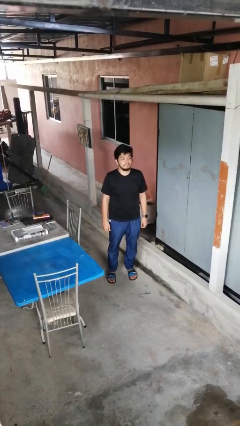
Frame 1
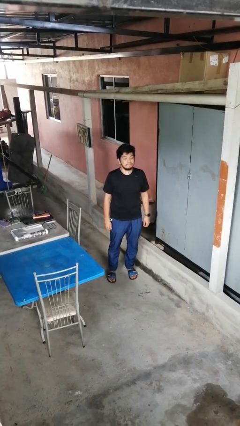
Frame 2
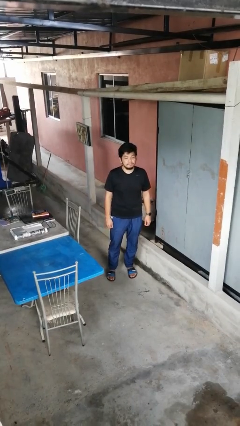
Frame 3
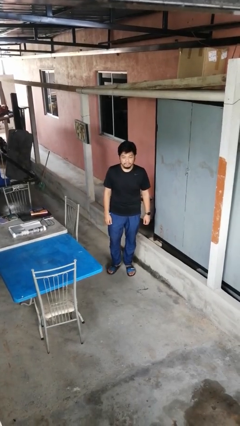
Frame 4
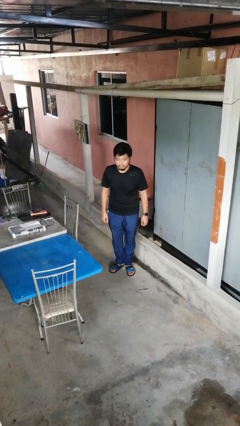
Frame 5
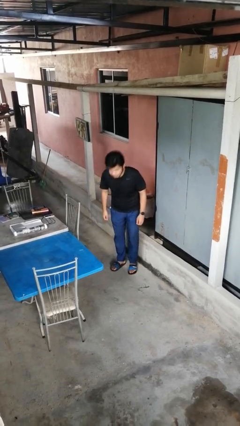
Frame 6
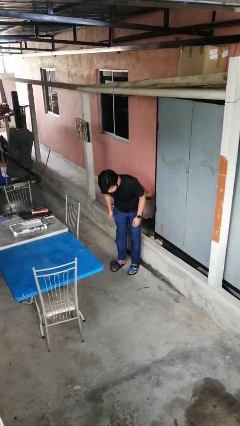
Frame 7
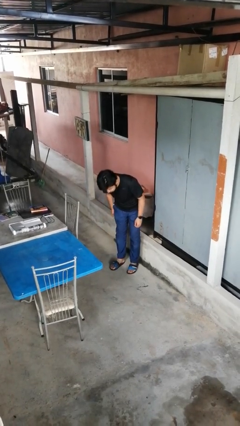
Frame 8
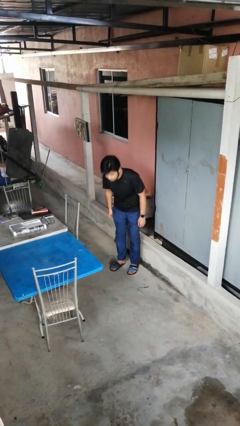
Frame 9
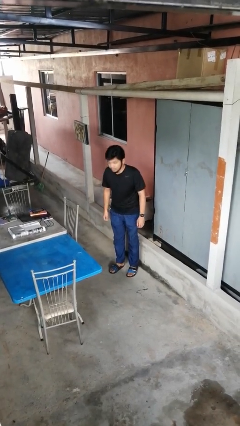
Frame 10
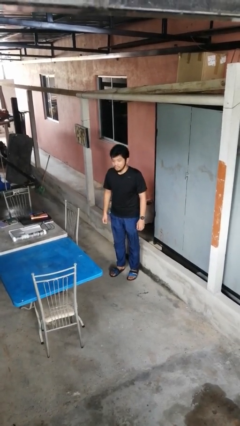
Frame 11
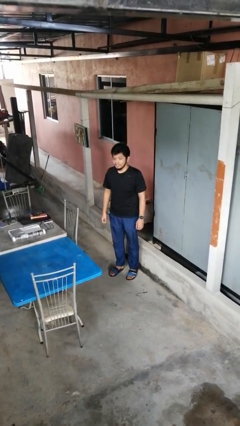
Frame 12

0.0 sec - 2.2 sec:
person bows

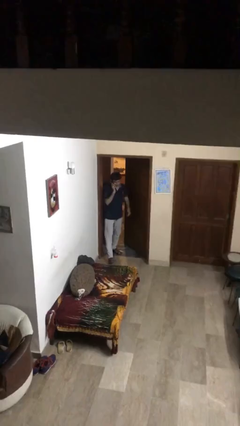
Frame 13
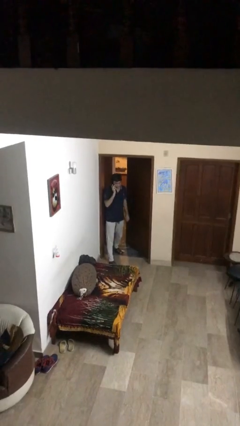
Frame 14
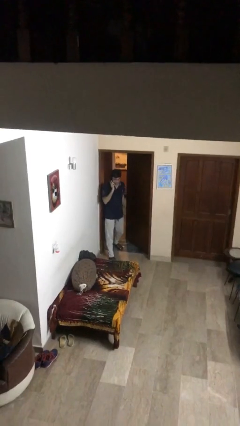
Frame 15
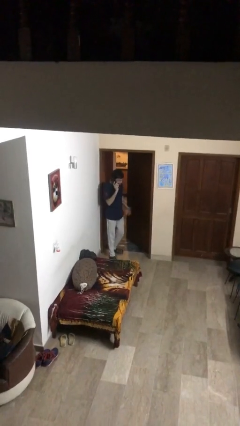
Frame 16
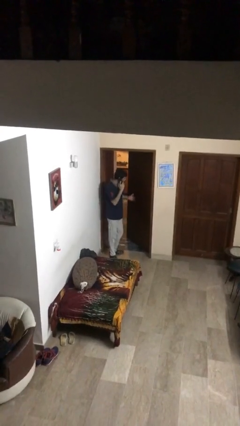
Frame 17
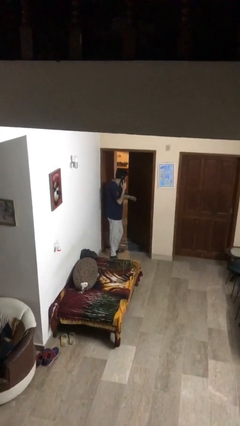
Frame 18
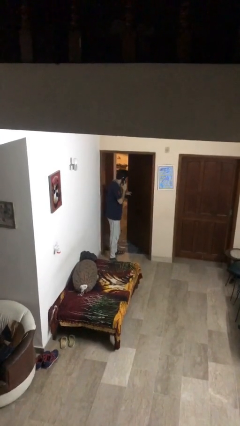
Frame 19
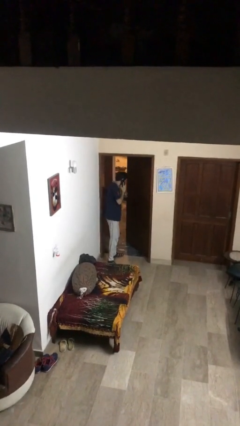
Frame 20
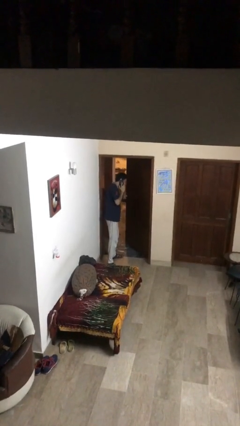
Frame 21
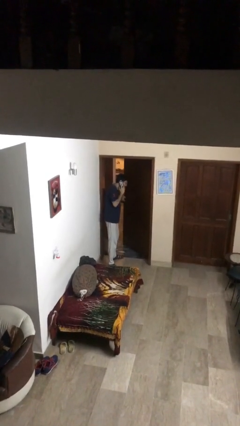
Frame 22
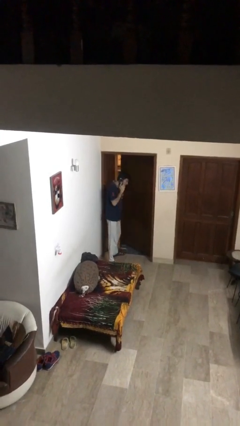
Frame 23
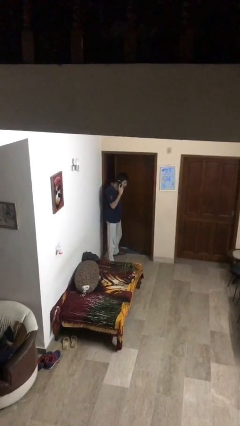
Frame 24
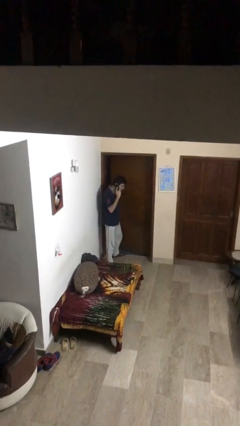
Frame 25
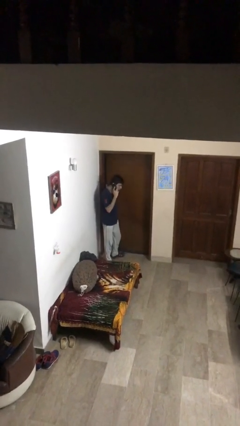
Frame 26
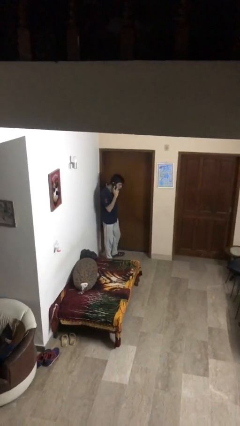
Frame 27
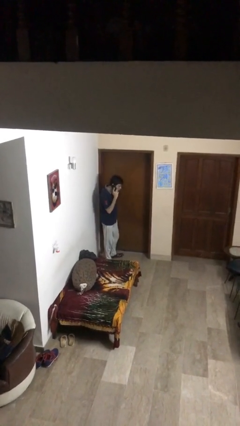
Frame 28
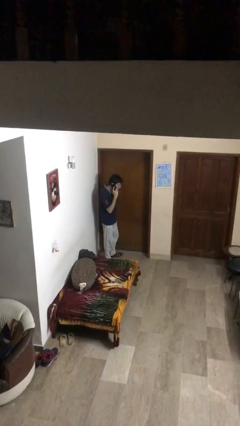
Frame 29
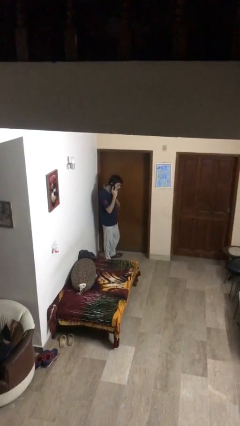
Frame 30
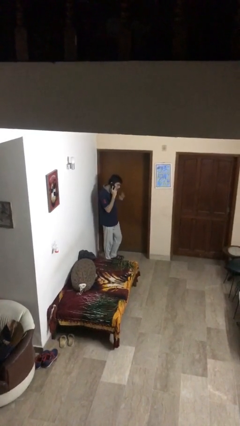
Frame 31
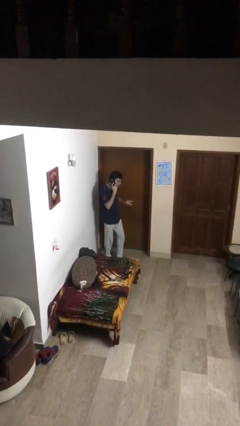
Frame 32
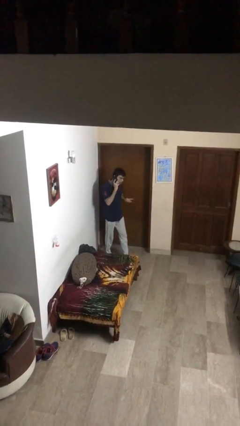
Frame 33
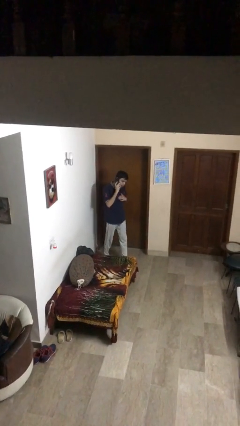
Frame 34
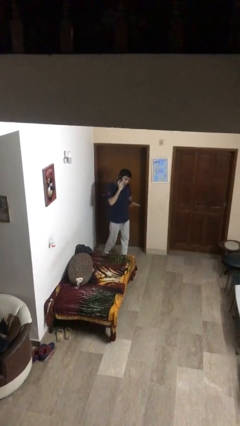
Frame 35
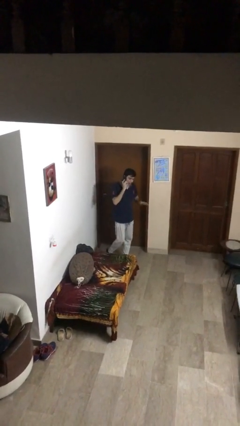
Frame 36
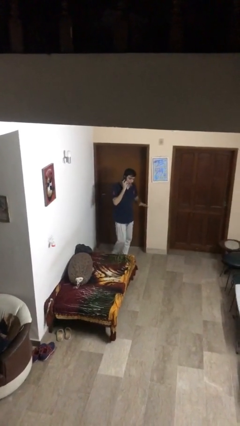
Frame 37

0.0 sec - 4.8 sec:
person closes facility door

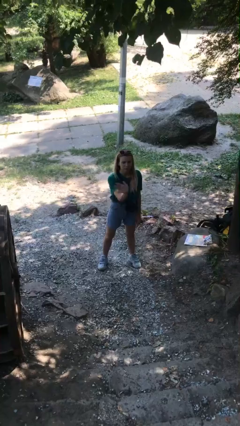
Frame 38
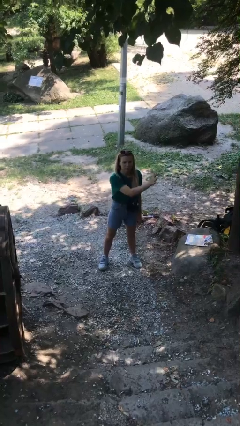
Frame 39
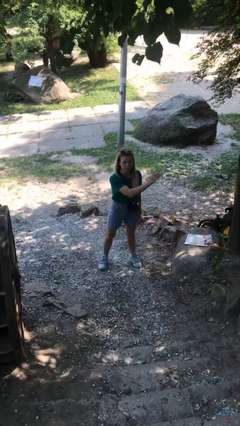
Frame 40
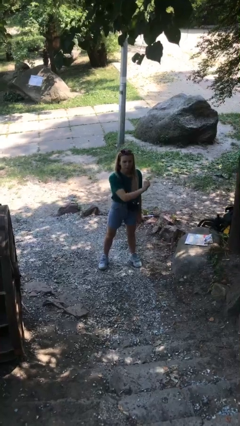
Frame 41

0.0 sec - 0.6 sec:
person gestures swipe left

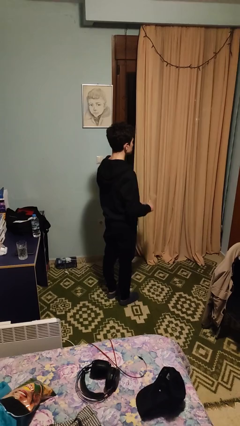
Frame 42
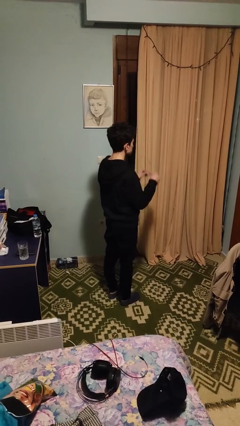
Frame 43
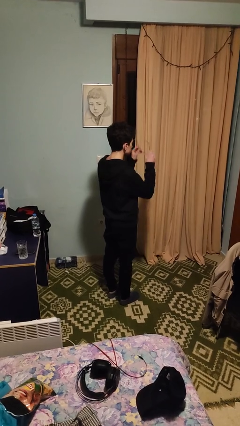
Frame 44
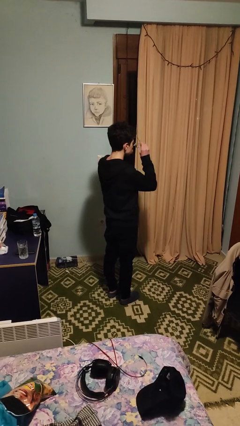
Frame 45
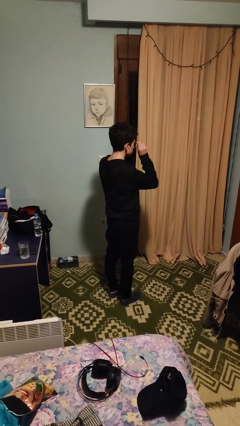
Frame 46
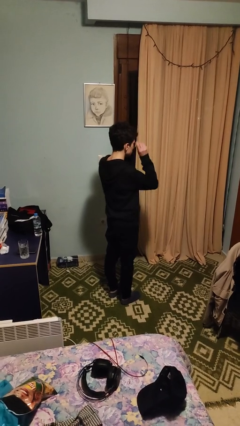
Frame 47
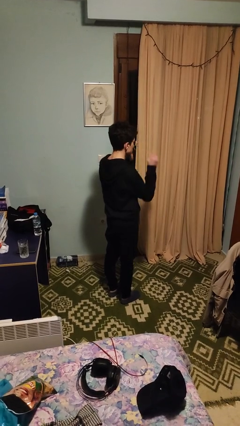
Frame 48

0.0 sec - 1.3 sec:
person puts on glasses

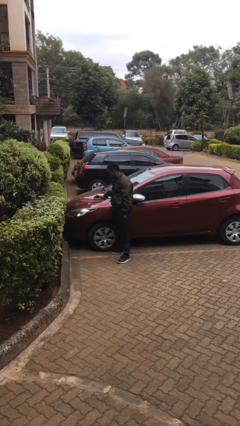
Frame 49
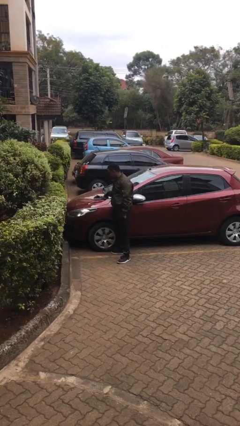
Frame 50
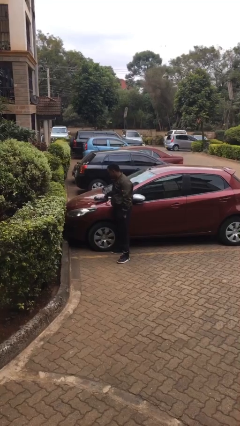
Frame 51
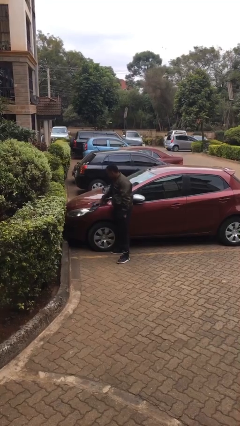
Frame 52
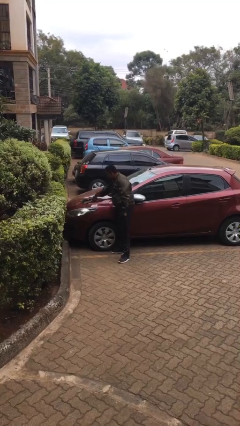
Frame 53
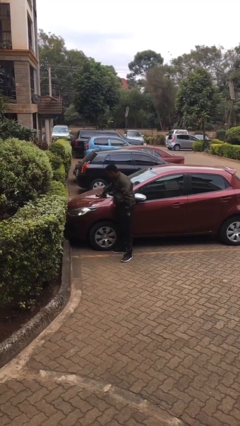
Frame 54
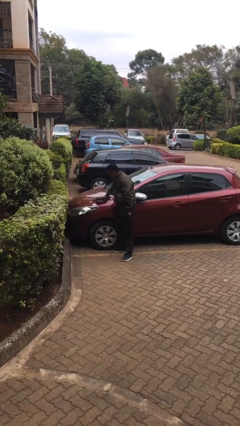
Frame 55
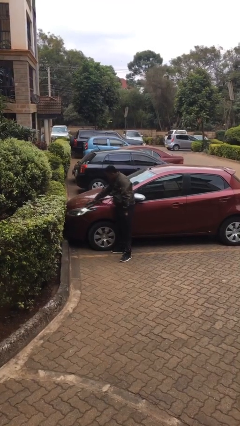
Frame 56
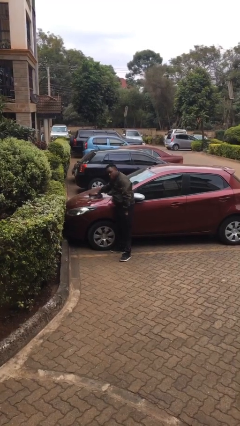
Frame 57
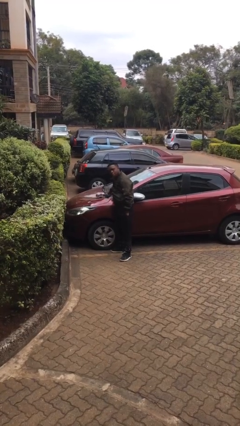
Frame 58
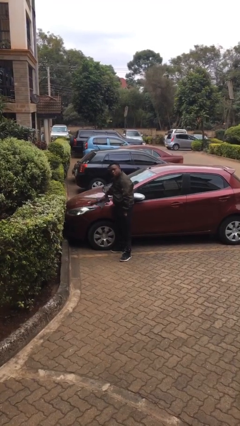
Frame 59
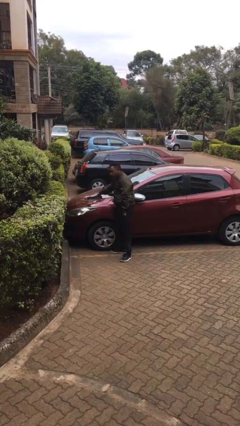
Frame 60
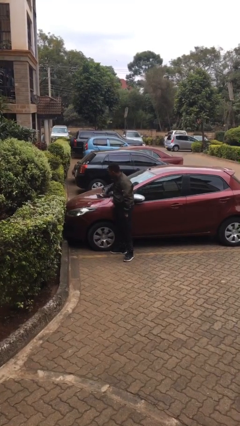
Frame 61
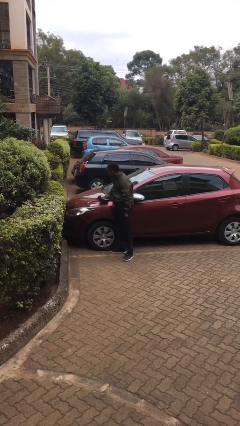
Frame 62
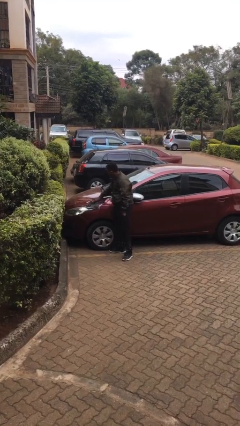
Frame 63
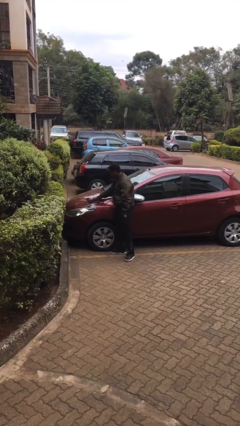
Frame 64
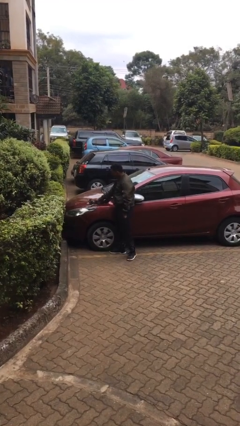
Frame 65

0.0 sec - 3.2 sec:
person polishes car with rag

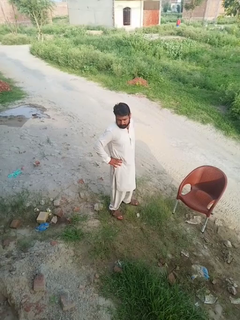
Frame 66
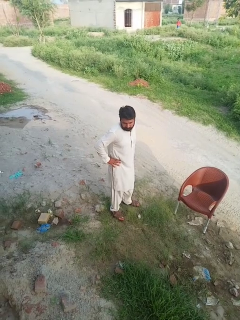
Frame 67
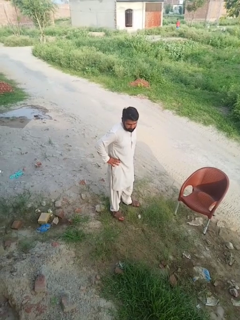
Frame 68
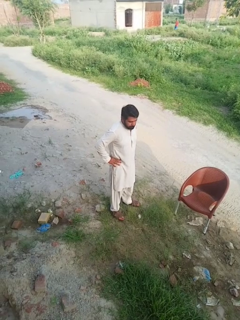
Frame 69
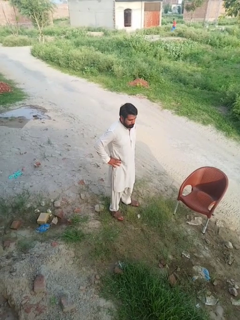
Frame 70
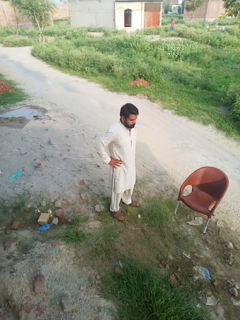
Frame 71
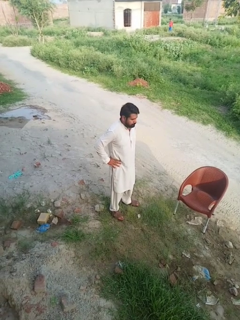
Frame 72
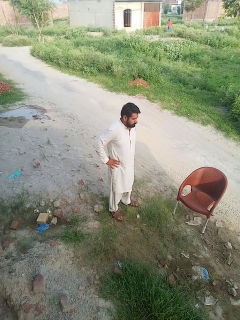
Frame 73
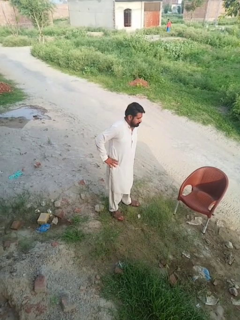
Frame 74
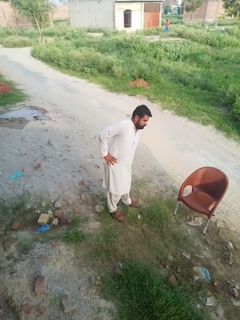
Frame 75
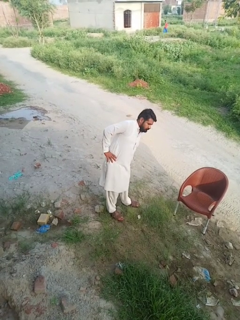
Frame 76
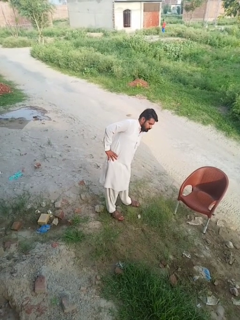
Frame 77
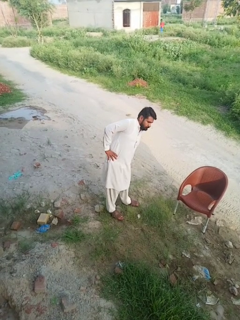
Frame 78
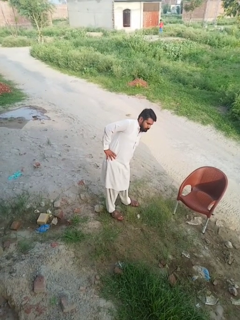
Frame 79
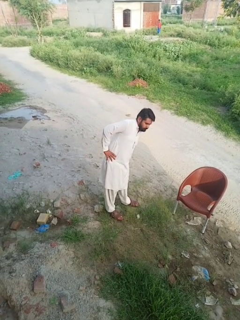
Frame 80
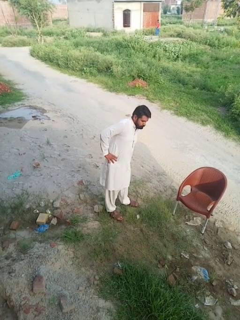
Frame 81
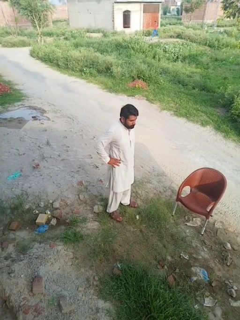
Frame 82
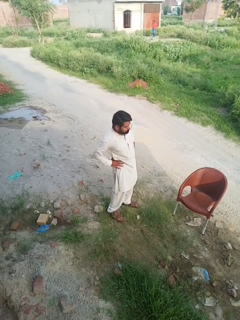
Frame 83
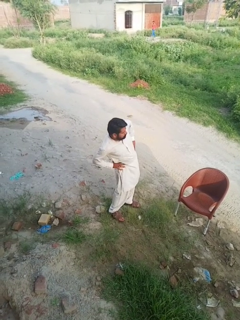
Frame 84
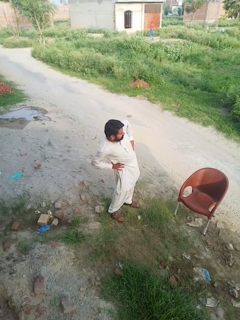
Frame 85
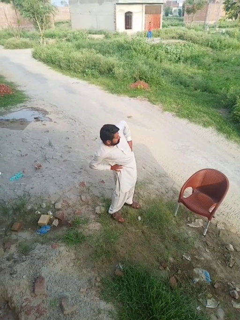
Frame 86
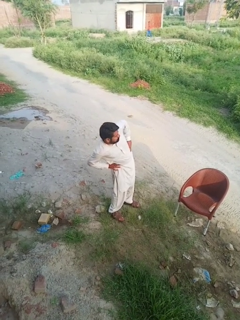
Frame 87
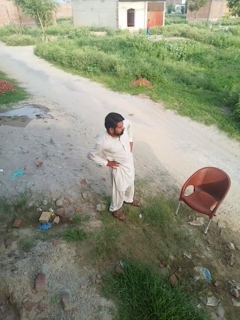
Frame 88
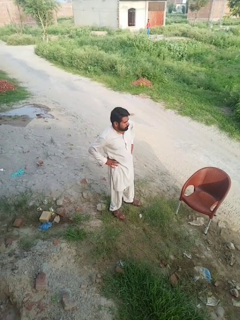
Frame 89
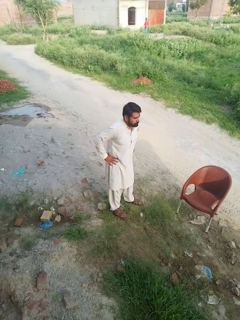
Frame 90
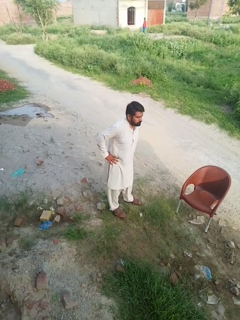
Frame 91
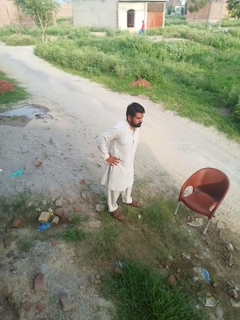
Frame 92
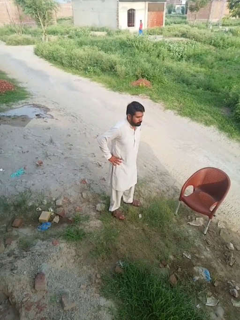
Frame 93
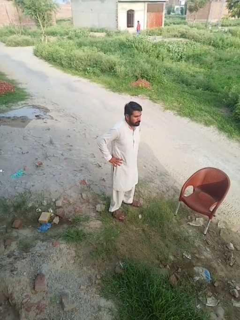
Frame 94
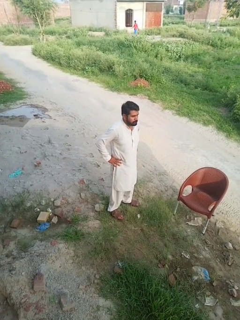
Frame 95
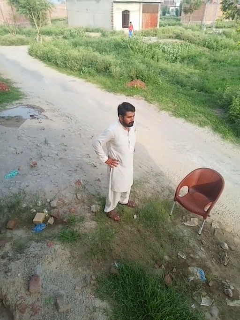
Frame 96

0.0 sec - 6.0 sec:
person stretches arms to side

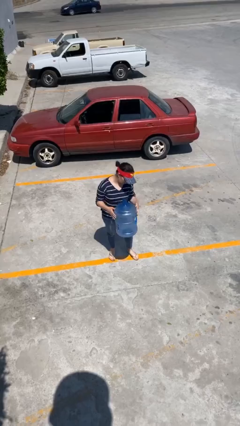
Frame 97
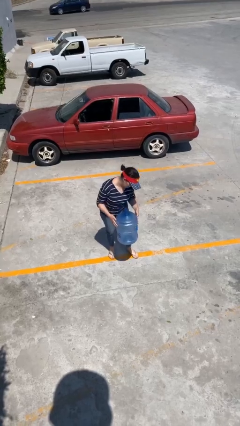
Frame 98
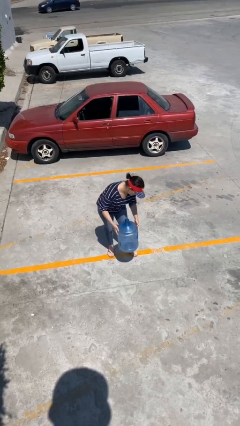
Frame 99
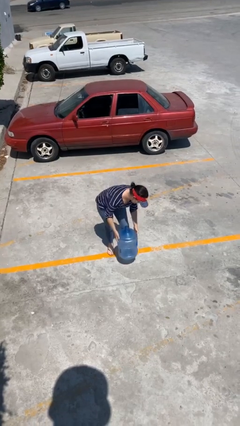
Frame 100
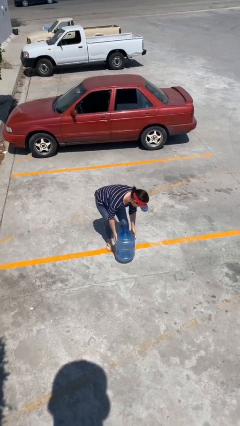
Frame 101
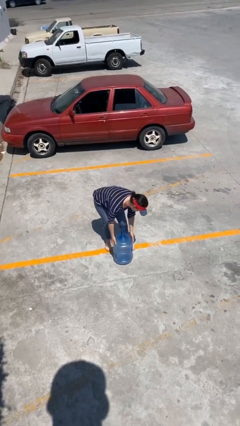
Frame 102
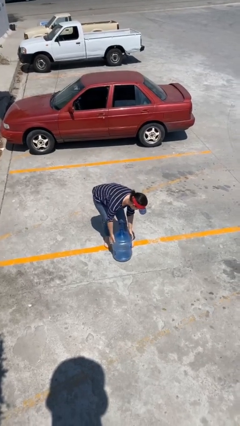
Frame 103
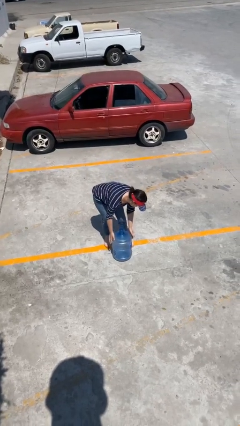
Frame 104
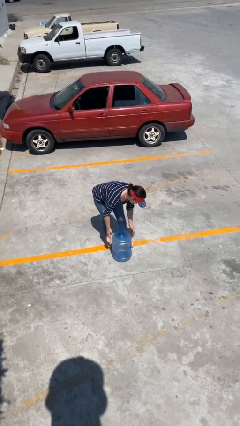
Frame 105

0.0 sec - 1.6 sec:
person puts down object on floor
